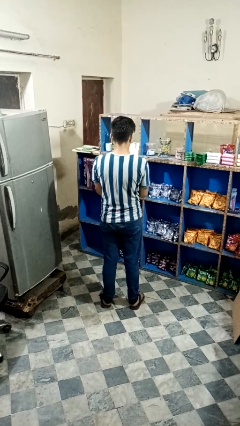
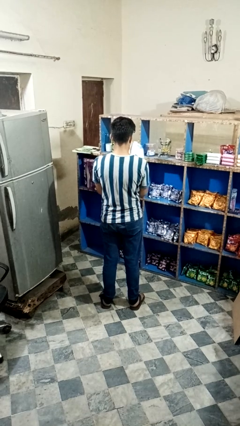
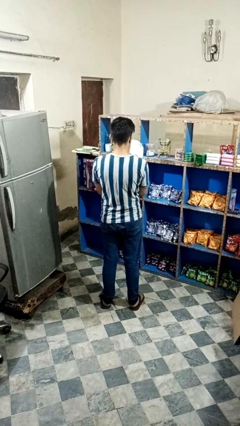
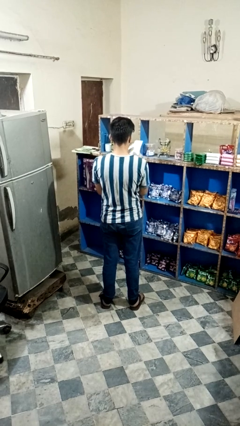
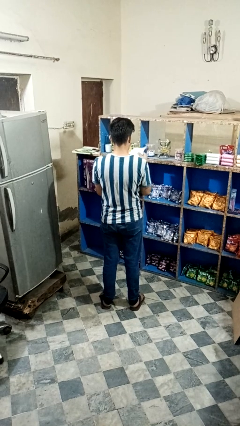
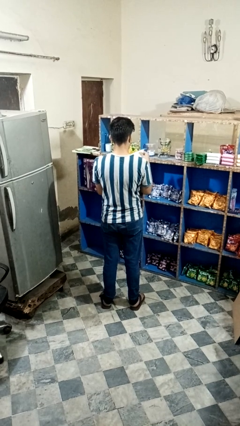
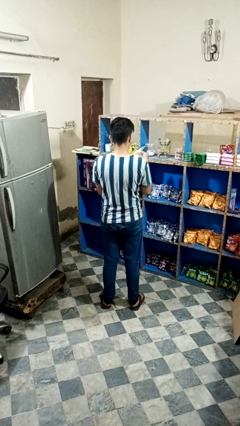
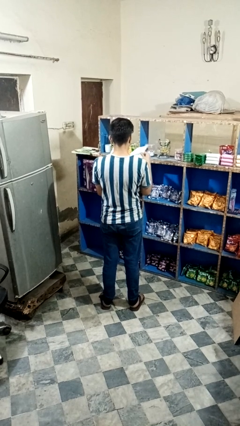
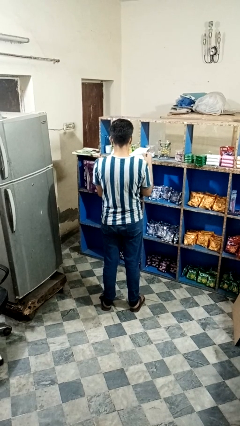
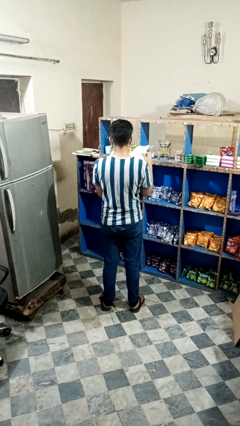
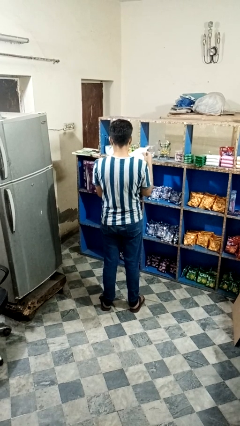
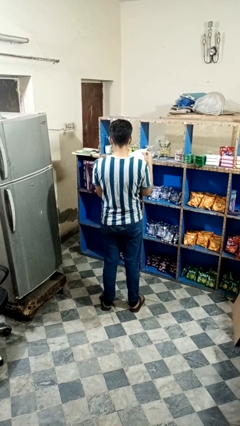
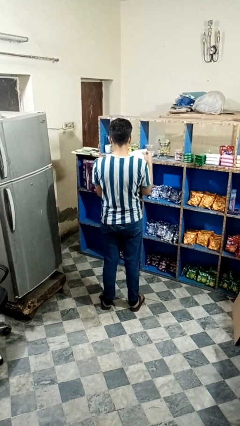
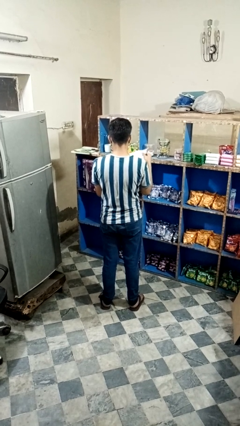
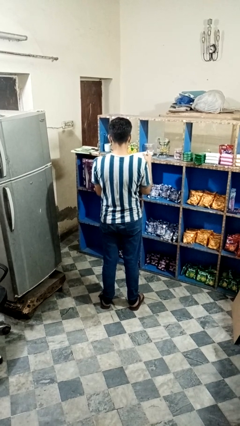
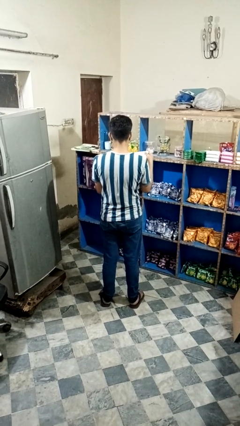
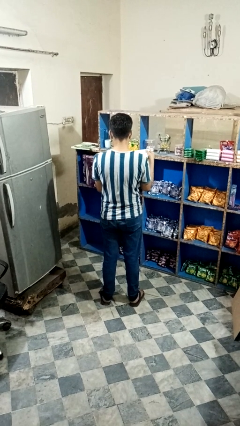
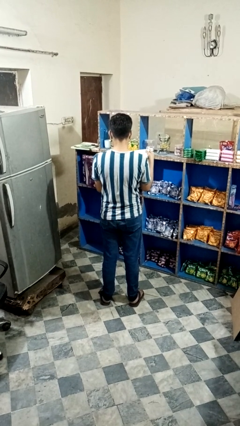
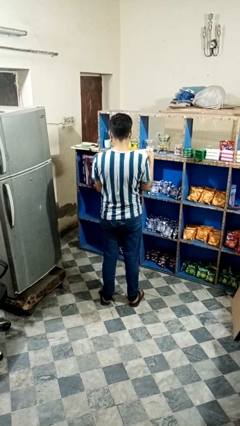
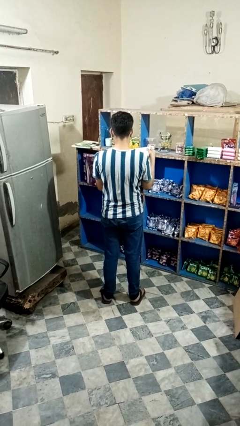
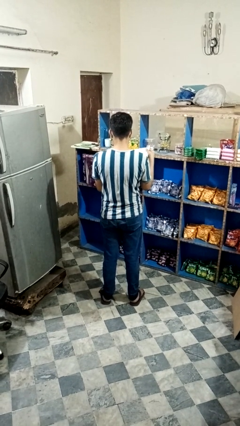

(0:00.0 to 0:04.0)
person reads newspaper

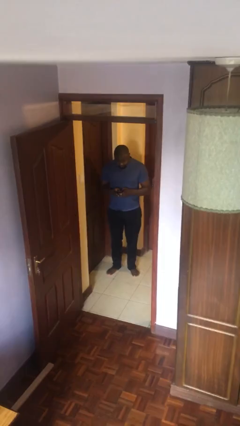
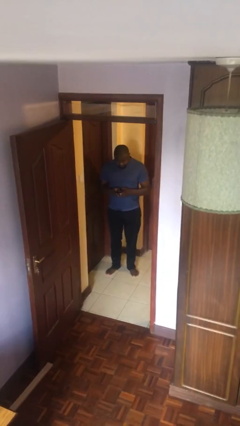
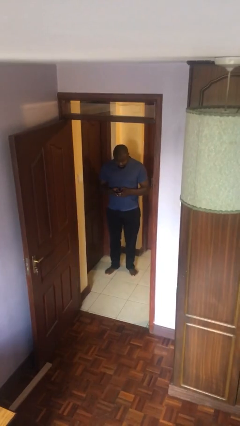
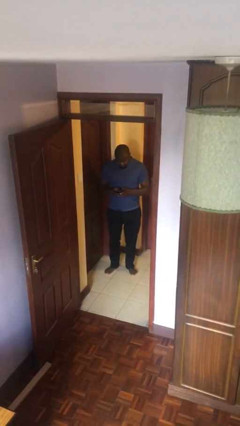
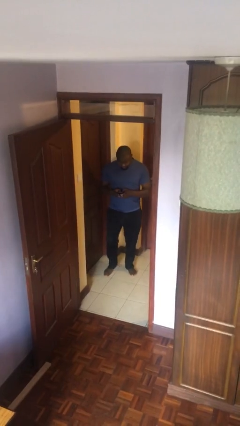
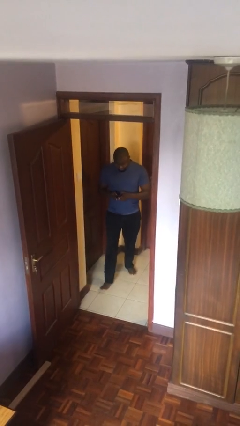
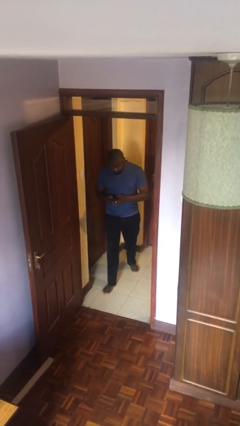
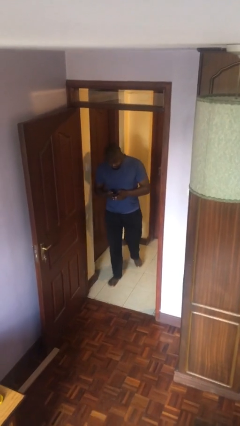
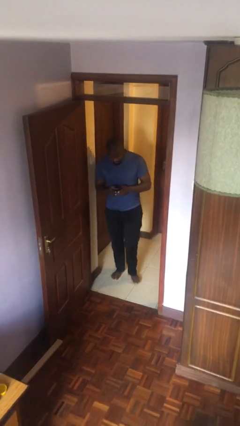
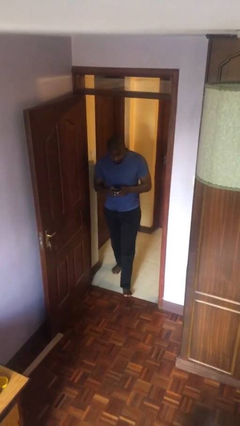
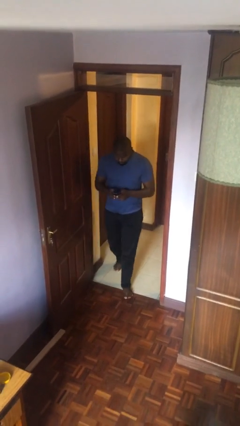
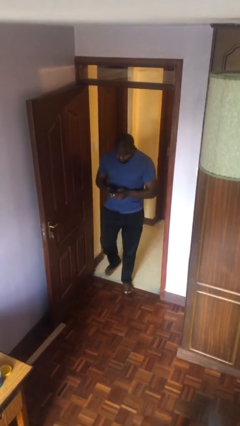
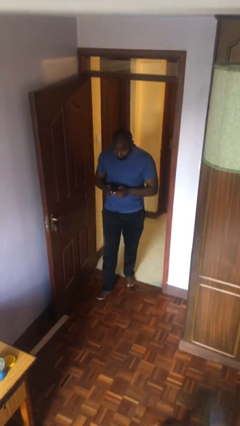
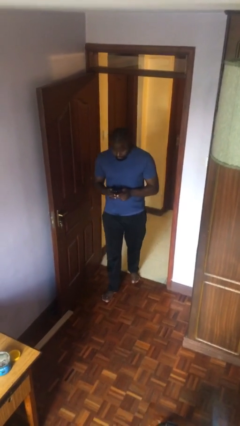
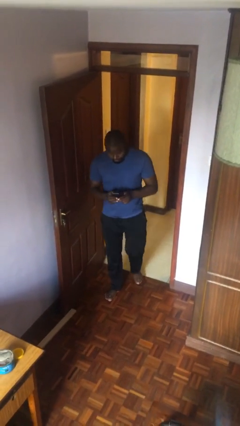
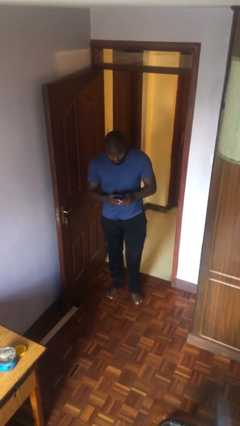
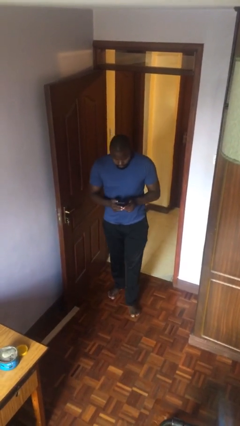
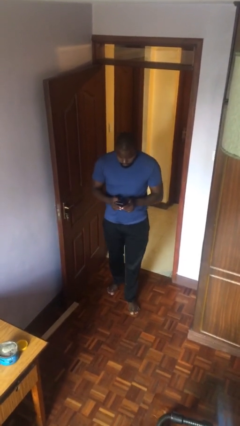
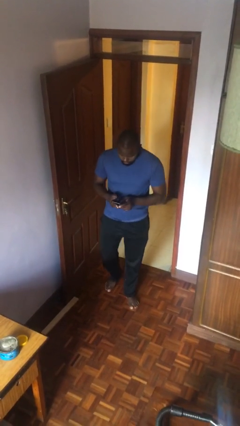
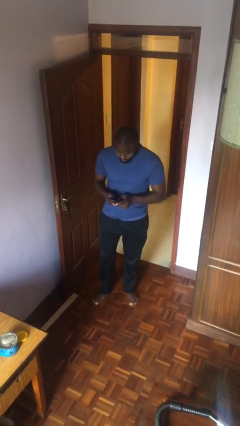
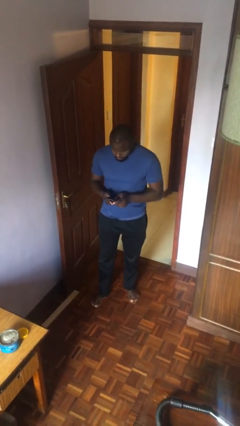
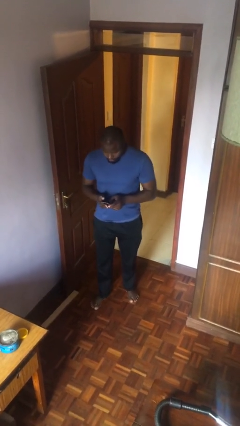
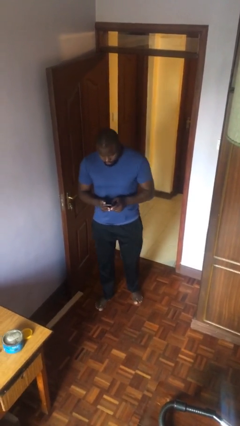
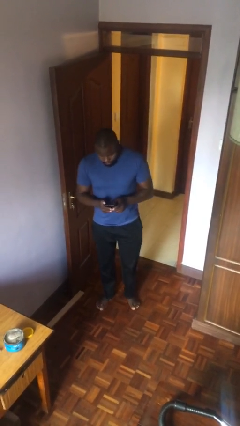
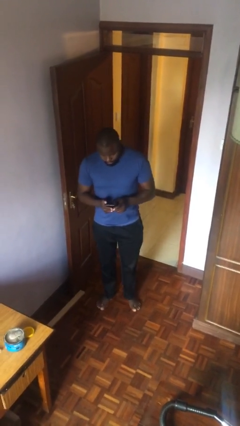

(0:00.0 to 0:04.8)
person enters scene through structure

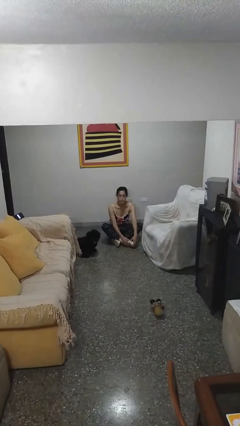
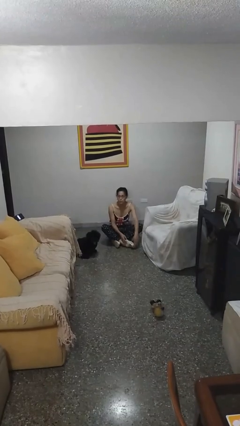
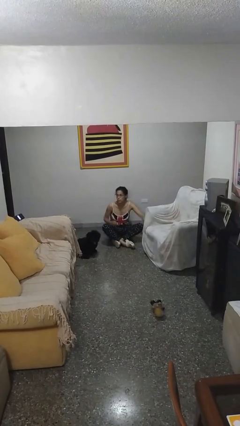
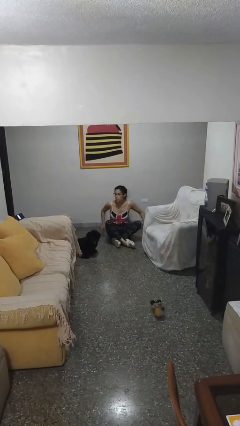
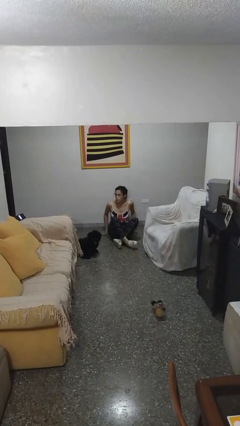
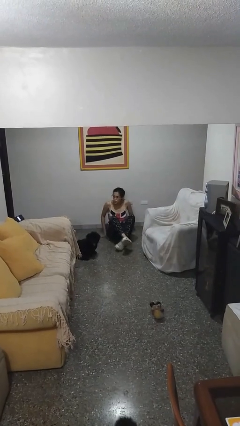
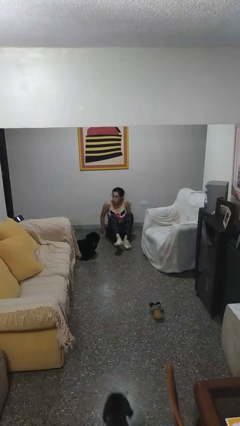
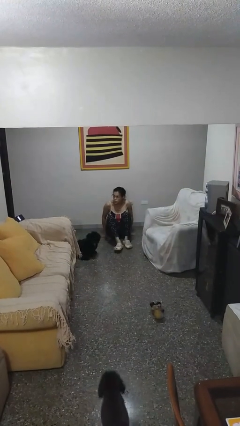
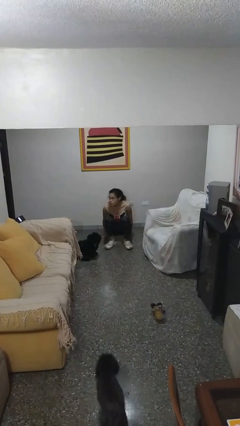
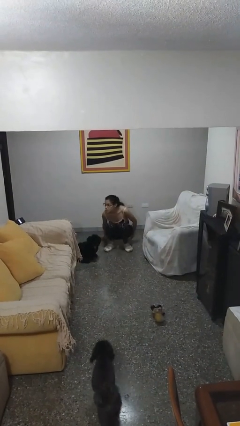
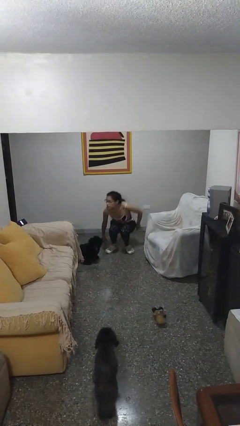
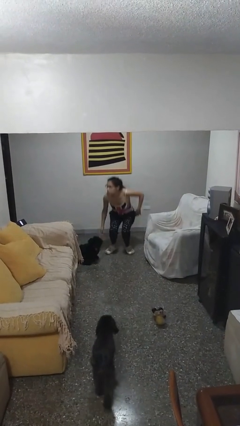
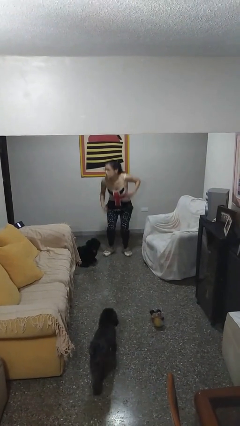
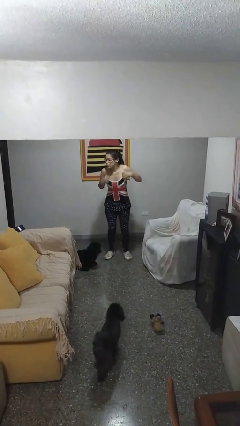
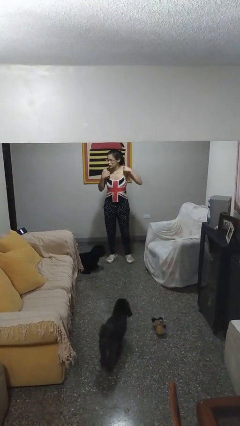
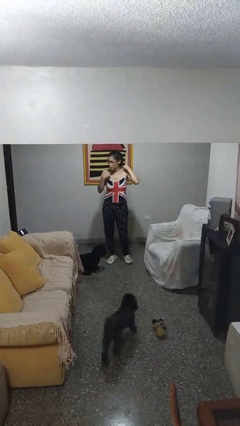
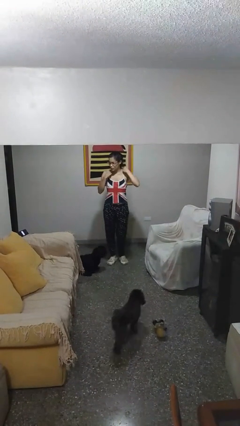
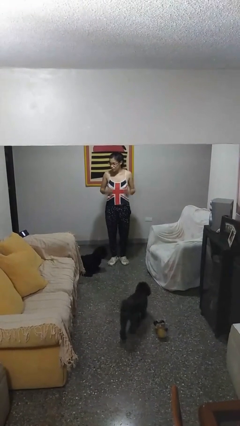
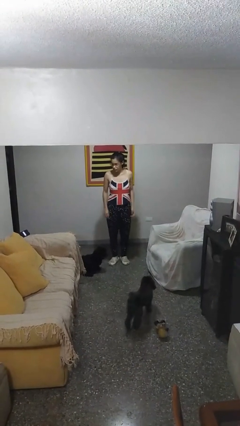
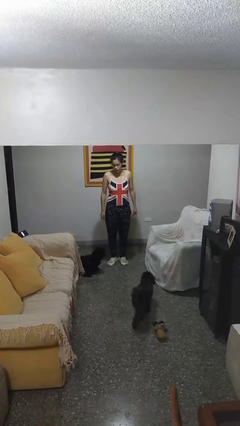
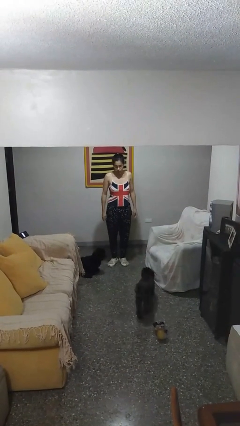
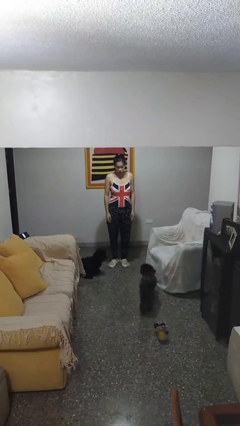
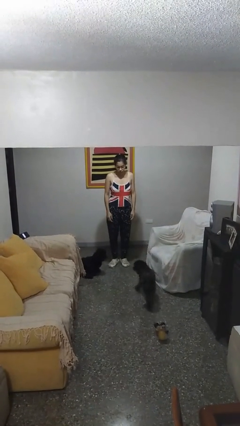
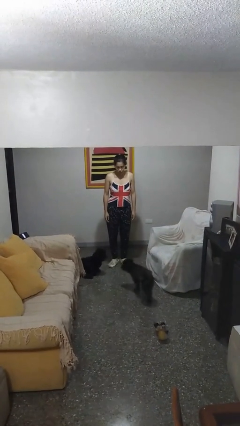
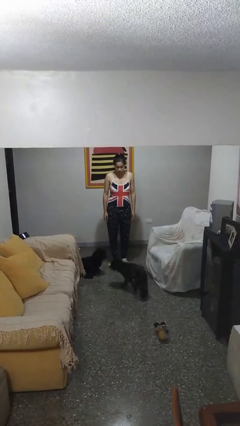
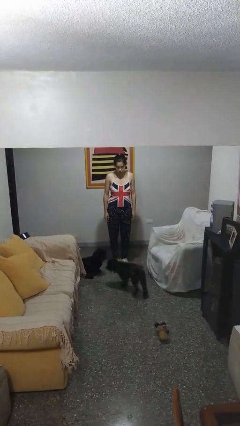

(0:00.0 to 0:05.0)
person stands up from floor

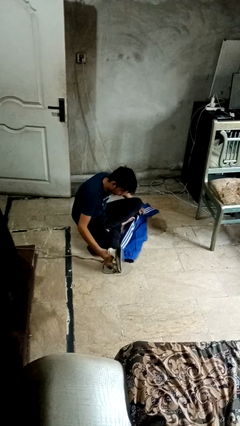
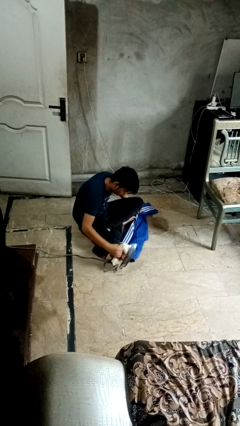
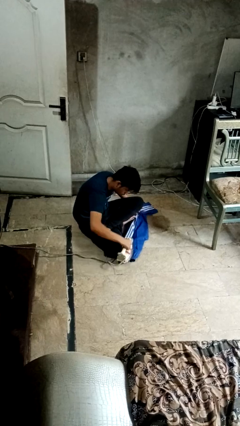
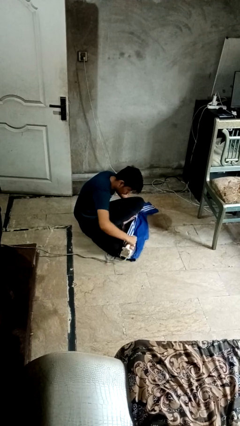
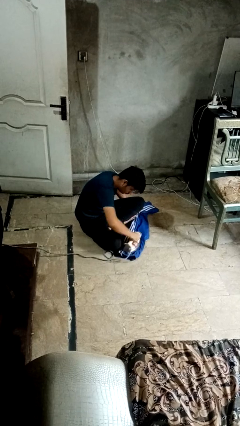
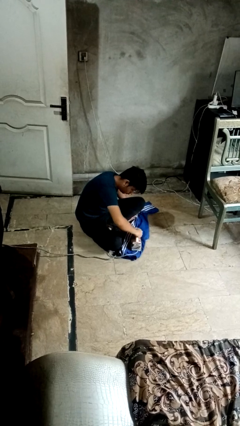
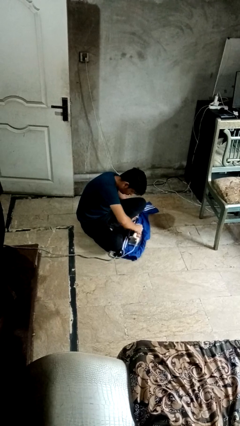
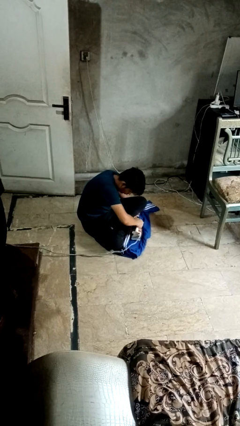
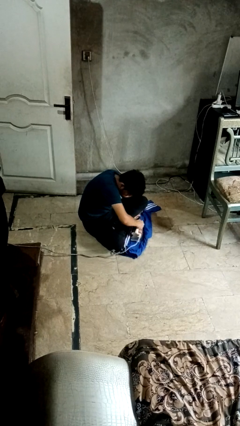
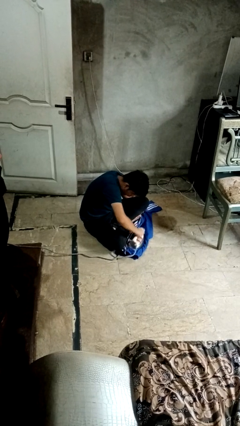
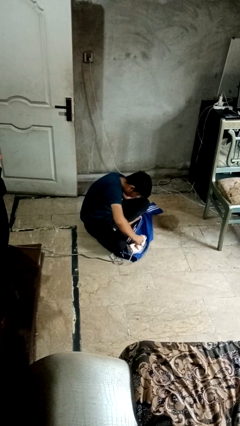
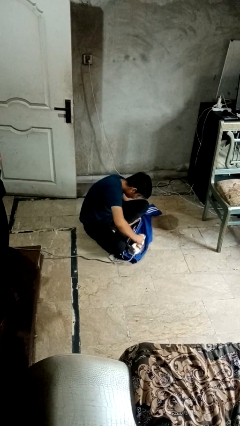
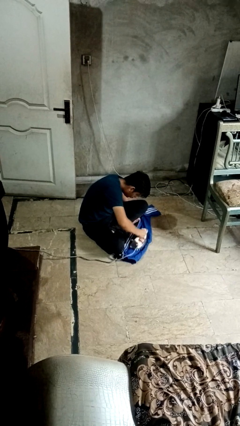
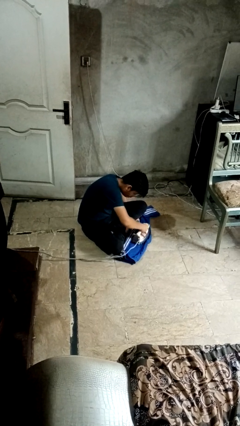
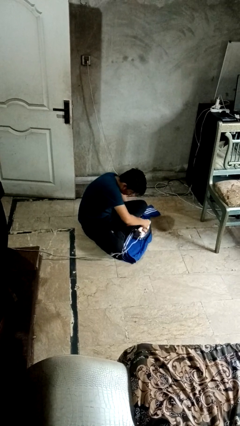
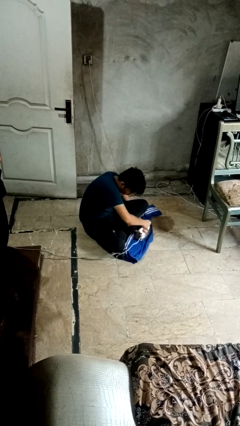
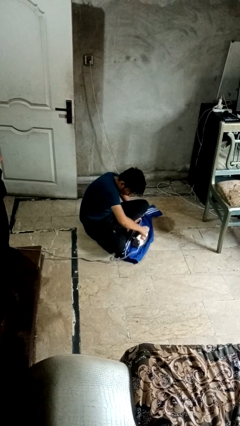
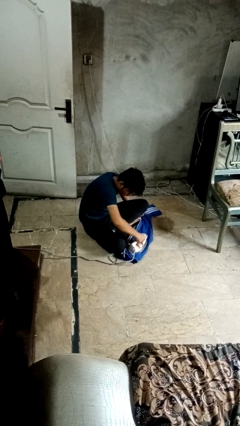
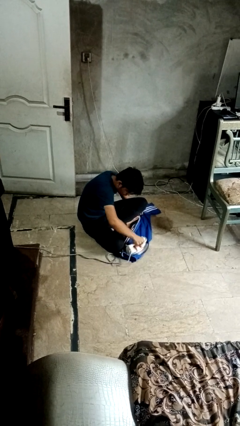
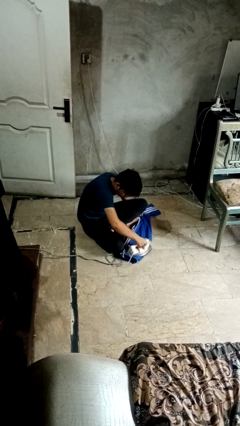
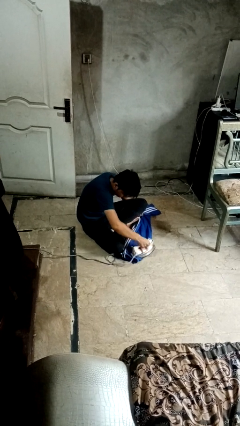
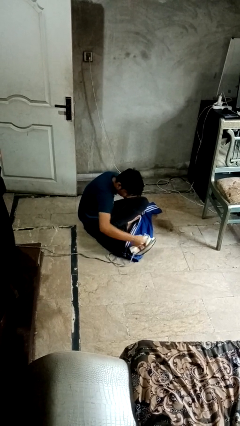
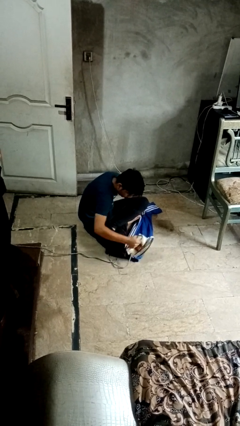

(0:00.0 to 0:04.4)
person irons clothes
